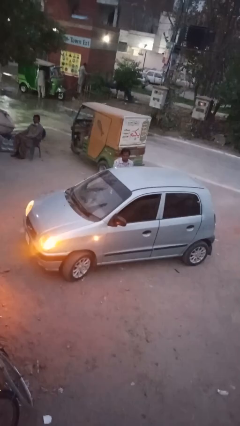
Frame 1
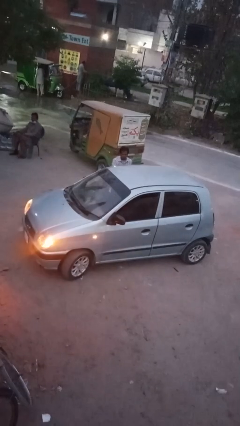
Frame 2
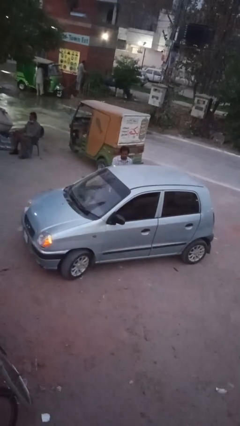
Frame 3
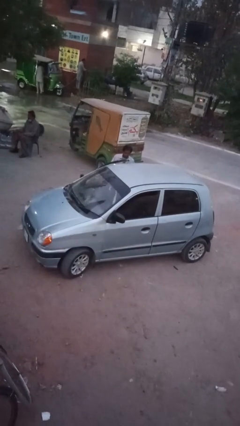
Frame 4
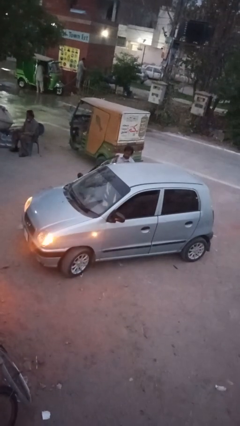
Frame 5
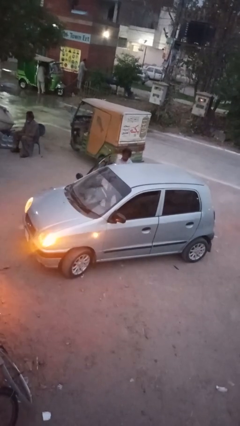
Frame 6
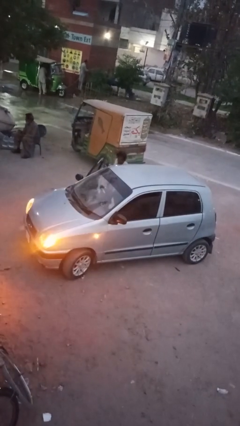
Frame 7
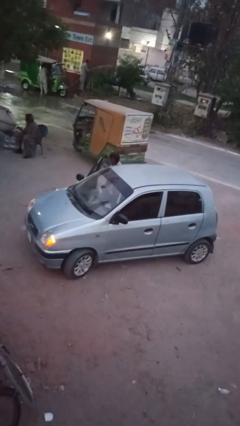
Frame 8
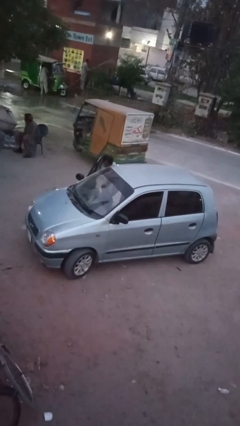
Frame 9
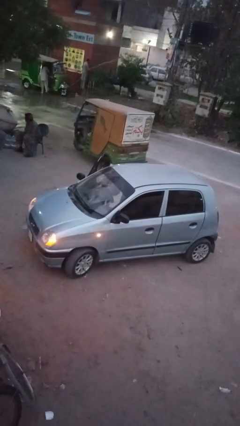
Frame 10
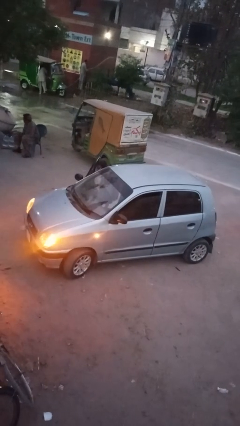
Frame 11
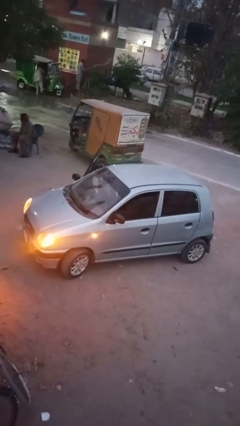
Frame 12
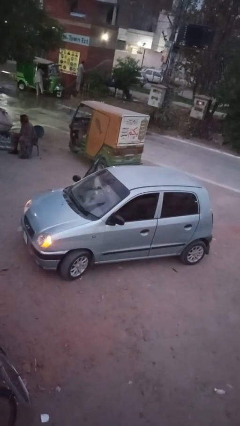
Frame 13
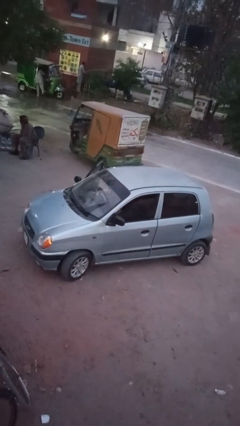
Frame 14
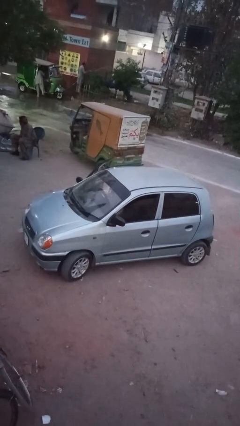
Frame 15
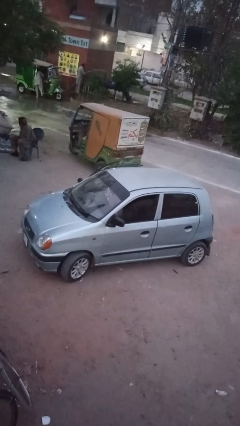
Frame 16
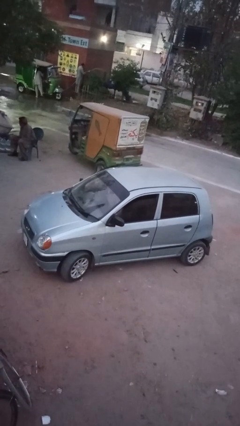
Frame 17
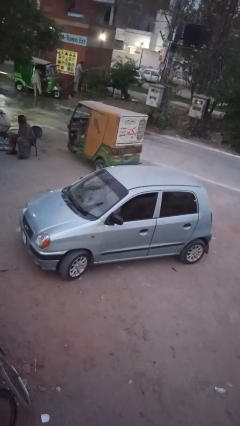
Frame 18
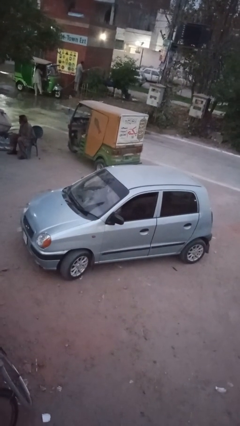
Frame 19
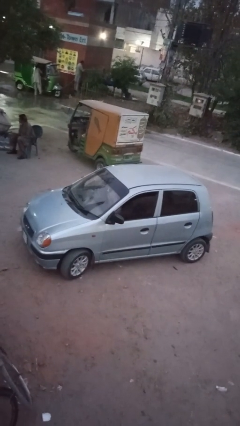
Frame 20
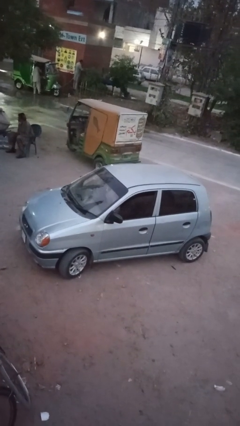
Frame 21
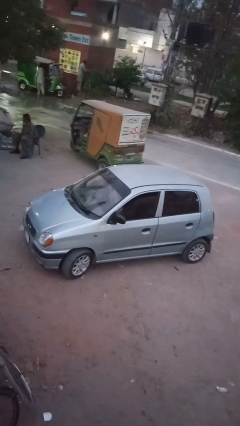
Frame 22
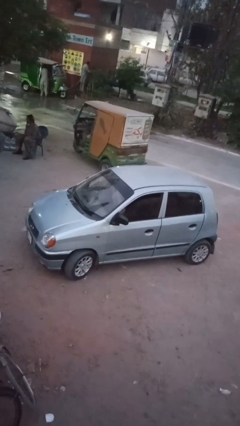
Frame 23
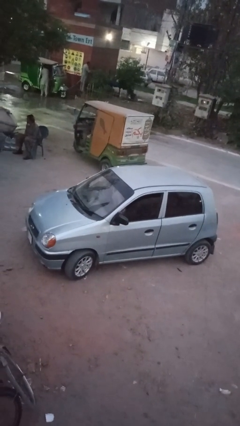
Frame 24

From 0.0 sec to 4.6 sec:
car picks up person

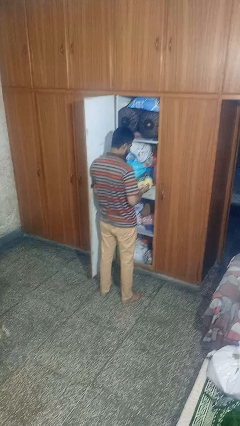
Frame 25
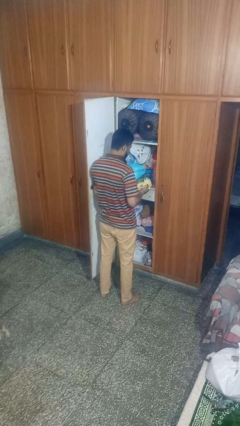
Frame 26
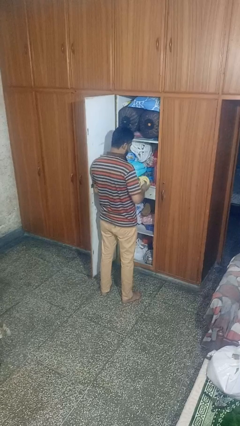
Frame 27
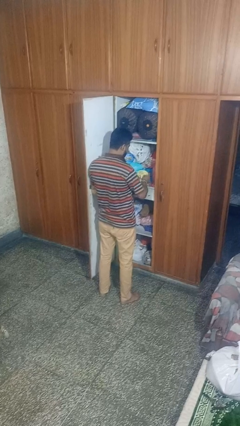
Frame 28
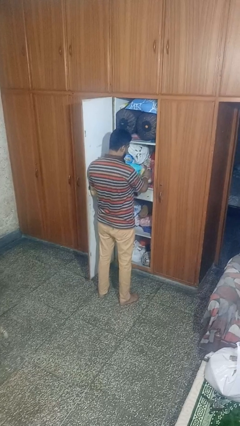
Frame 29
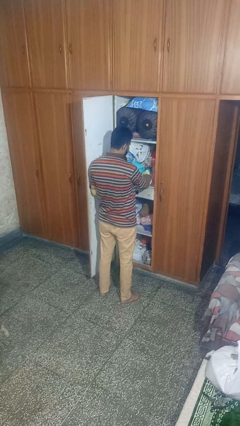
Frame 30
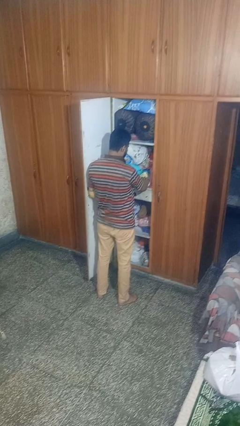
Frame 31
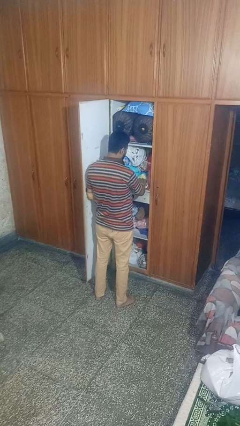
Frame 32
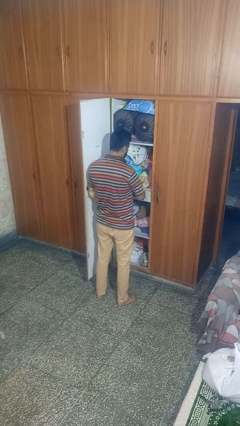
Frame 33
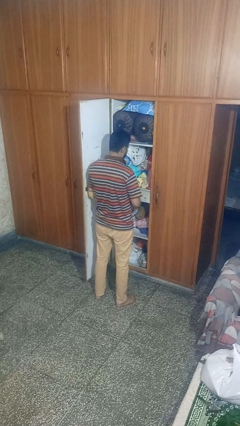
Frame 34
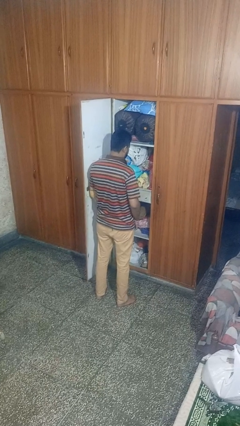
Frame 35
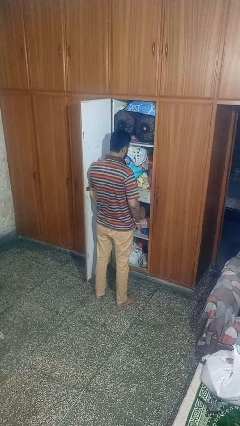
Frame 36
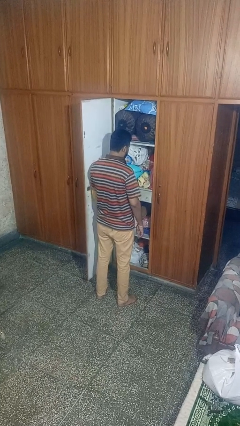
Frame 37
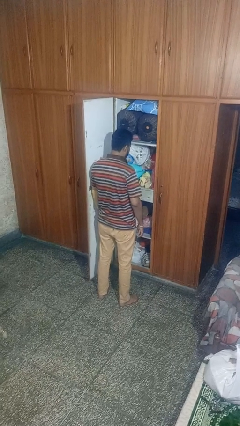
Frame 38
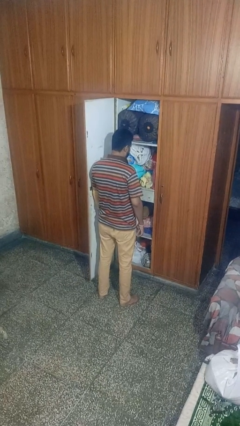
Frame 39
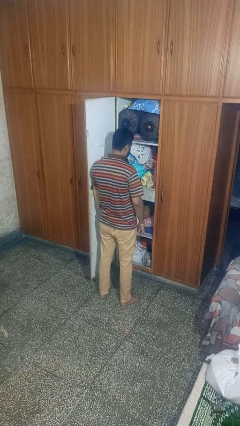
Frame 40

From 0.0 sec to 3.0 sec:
person puts down object into cabinet

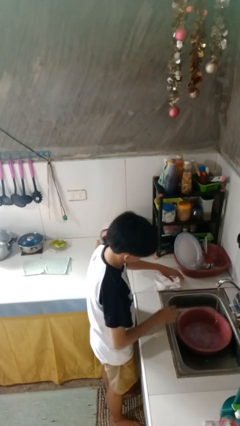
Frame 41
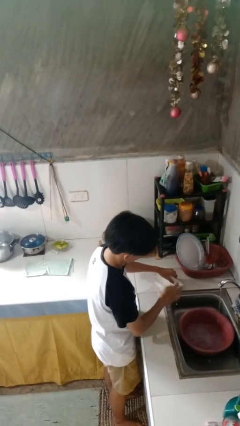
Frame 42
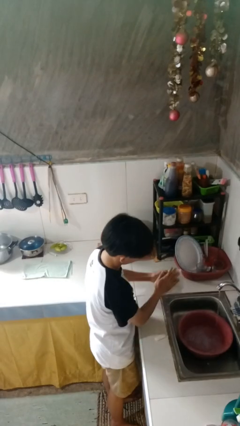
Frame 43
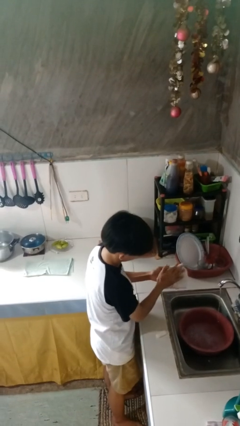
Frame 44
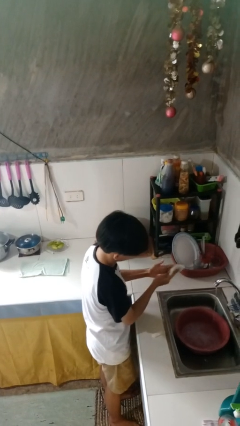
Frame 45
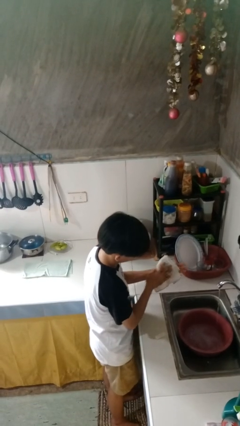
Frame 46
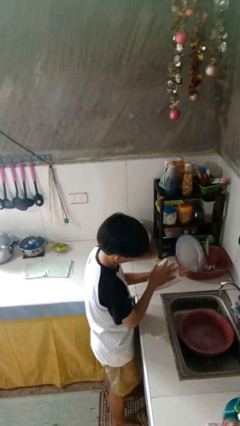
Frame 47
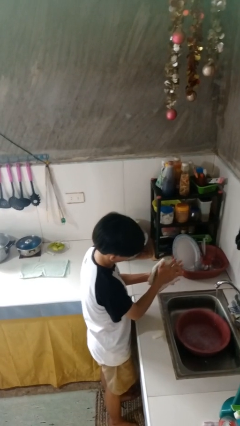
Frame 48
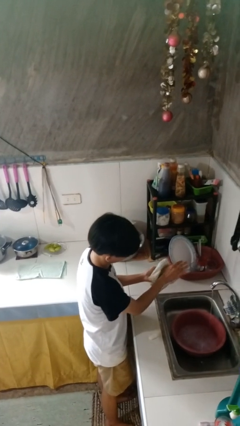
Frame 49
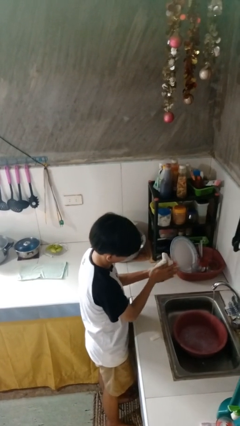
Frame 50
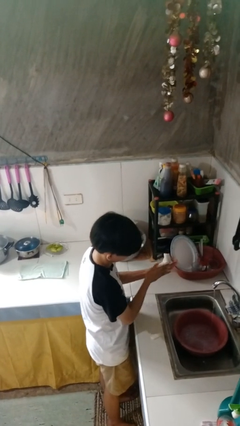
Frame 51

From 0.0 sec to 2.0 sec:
person dries hands with towel

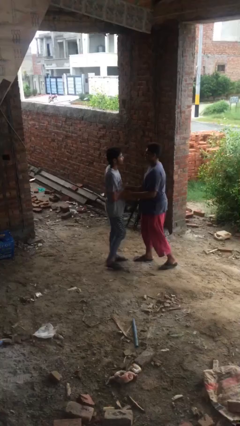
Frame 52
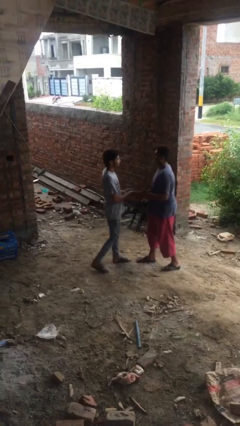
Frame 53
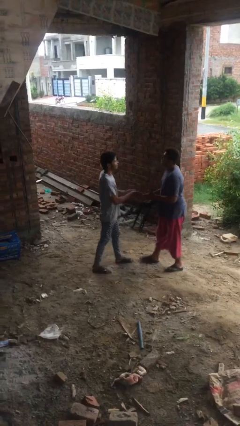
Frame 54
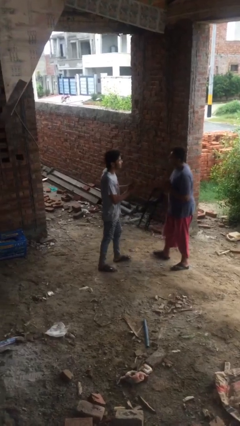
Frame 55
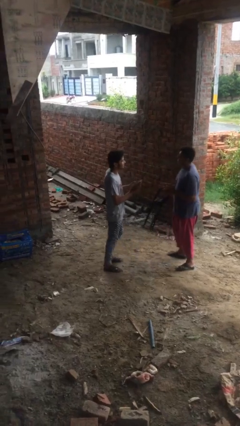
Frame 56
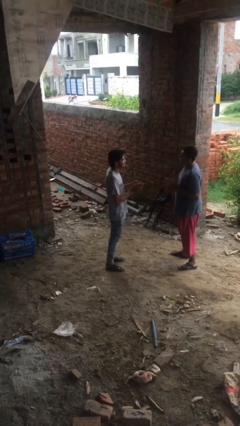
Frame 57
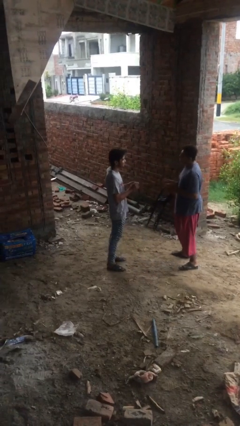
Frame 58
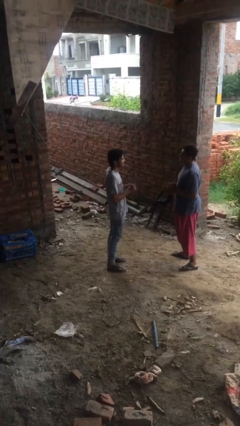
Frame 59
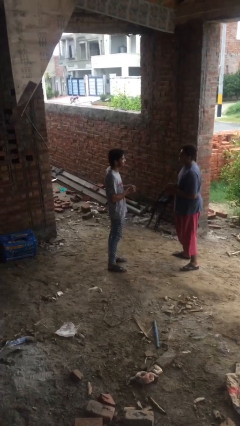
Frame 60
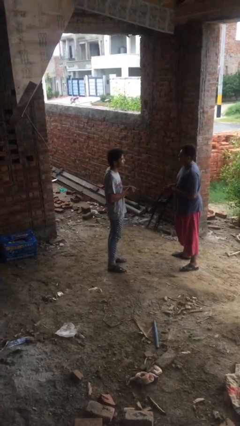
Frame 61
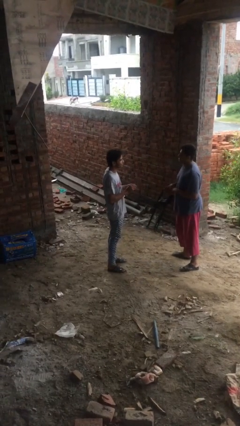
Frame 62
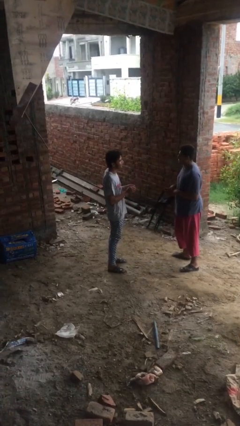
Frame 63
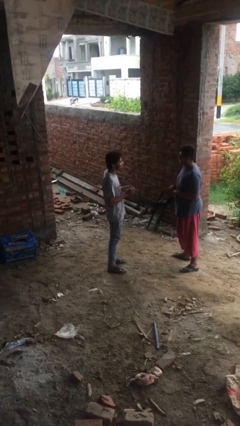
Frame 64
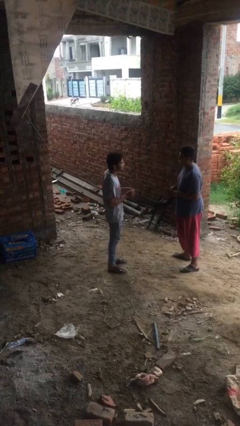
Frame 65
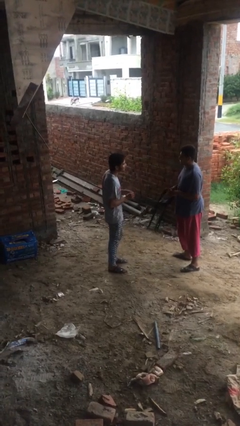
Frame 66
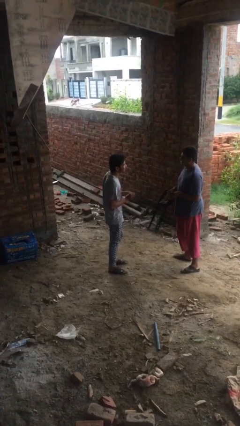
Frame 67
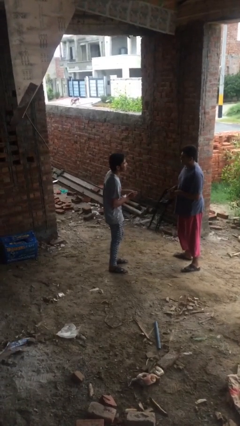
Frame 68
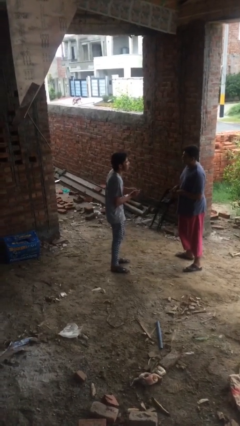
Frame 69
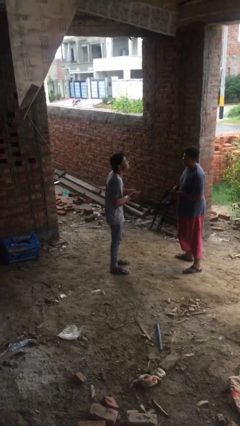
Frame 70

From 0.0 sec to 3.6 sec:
person talks to person

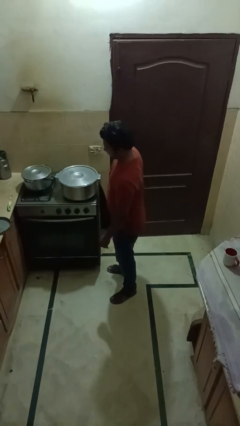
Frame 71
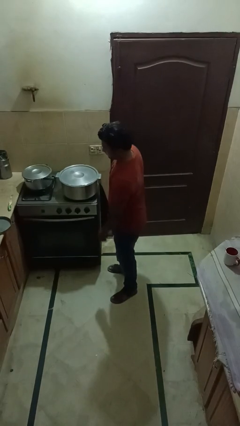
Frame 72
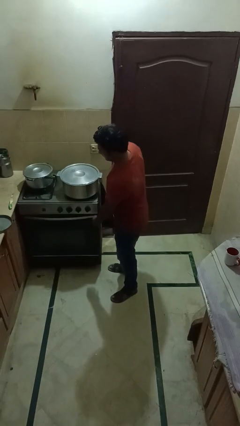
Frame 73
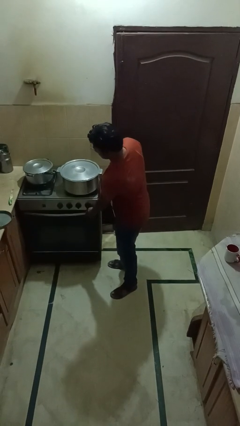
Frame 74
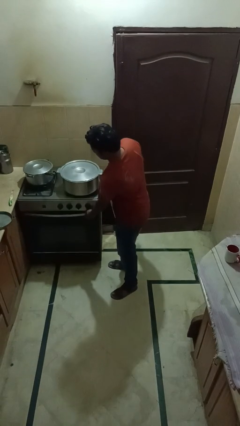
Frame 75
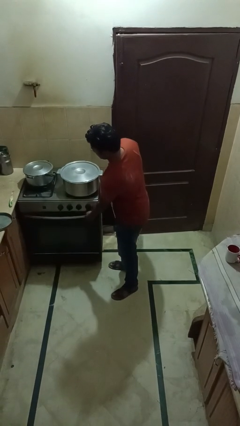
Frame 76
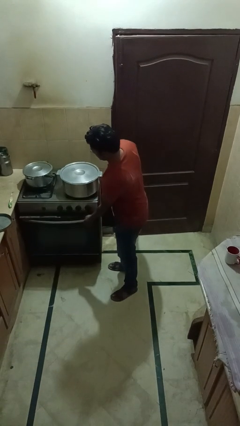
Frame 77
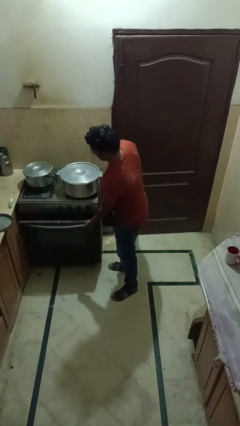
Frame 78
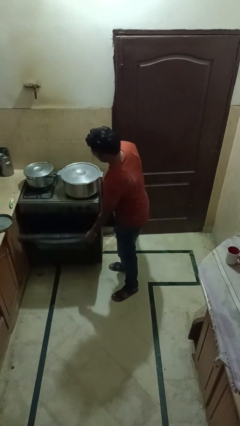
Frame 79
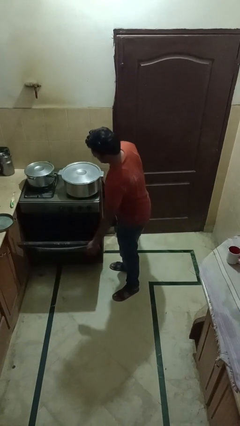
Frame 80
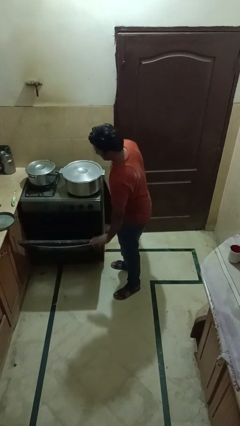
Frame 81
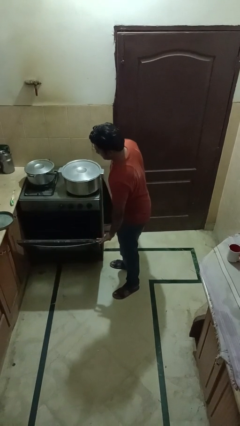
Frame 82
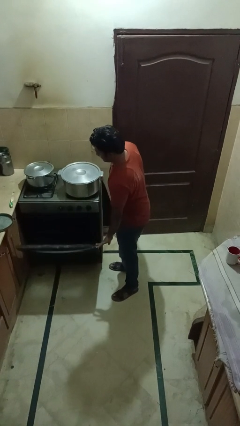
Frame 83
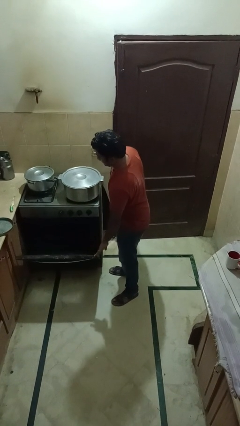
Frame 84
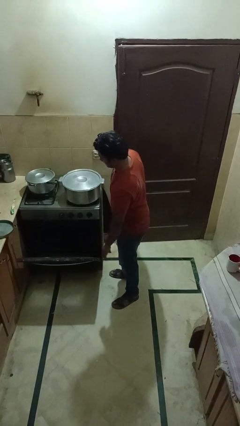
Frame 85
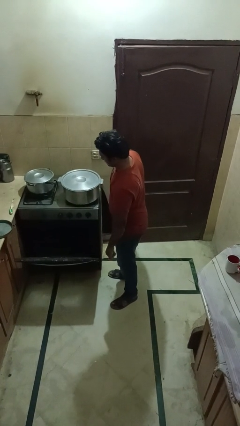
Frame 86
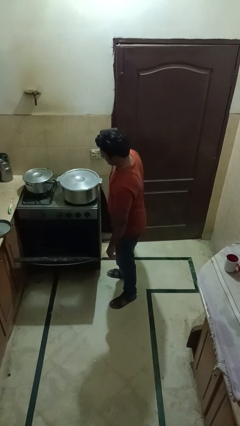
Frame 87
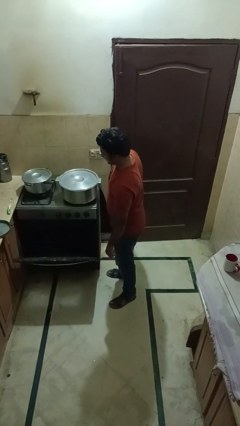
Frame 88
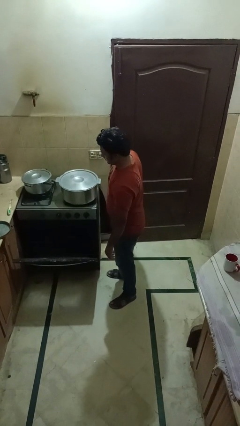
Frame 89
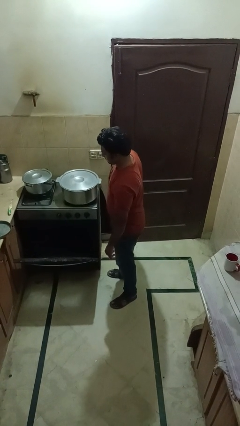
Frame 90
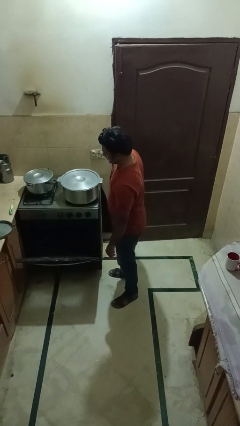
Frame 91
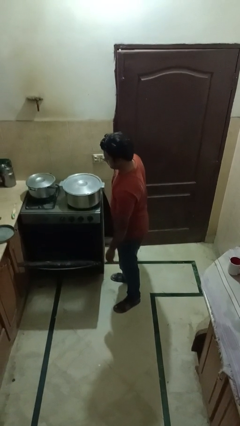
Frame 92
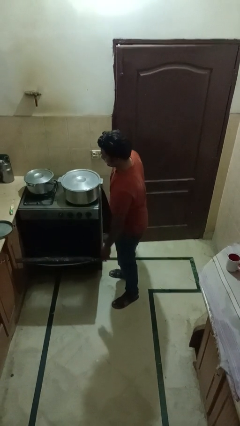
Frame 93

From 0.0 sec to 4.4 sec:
person opens oven door
